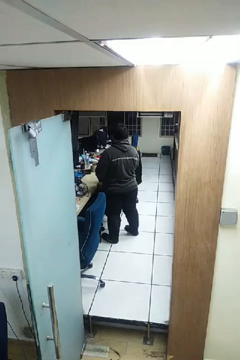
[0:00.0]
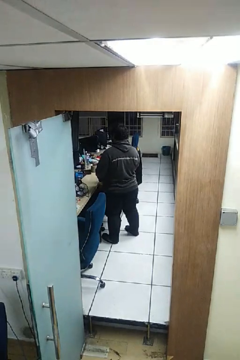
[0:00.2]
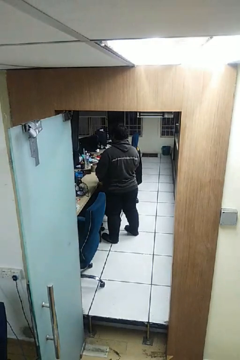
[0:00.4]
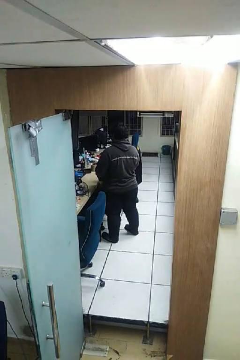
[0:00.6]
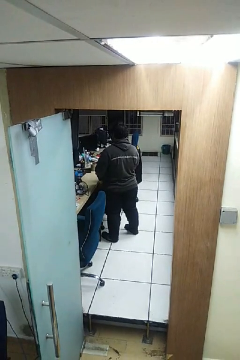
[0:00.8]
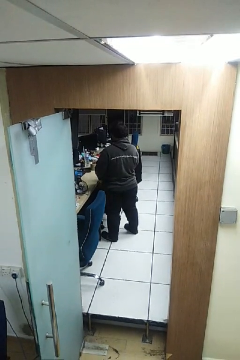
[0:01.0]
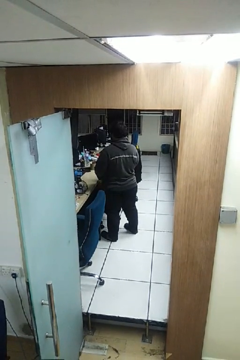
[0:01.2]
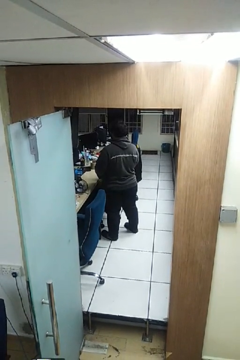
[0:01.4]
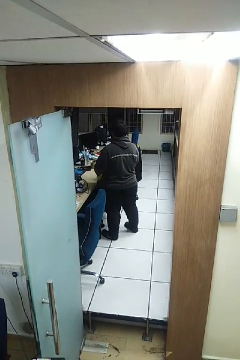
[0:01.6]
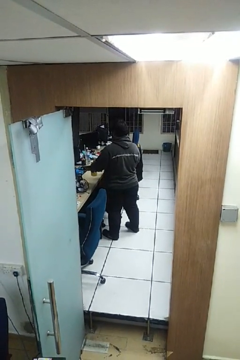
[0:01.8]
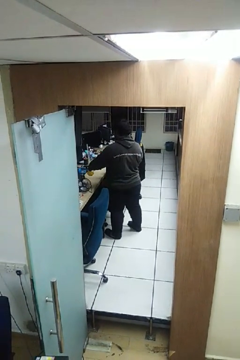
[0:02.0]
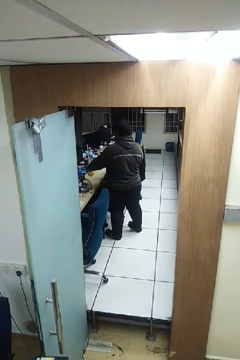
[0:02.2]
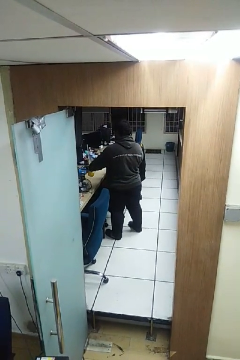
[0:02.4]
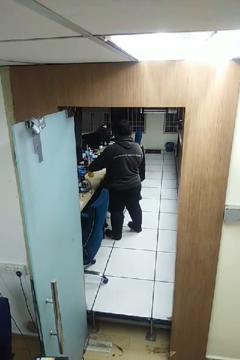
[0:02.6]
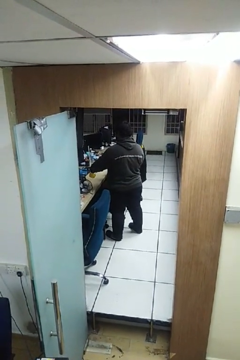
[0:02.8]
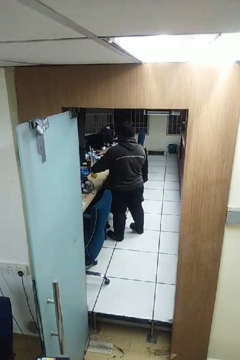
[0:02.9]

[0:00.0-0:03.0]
person sprays from bottle

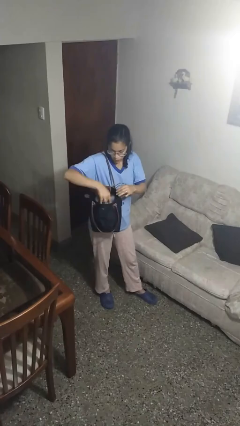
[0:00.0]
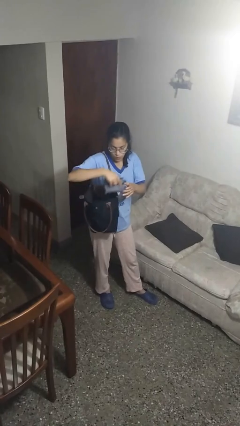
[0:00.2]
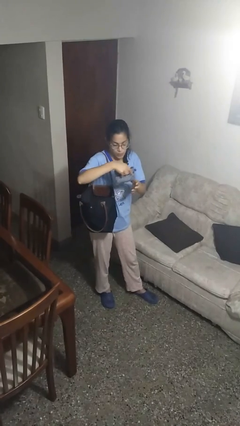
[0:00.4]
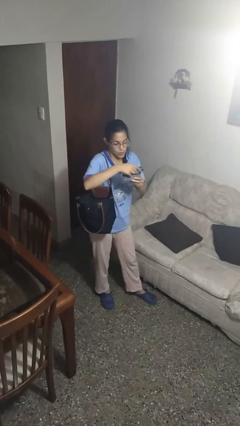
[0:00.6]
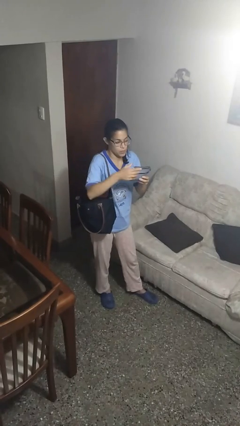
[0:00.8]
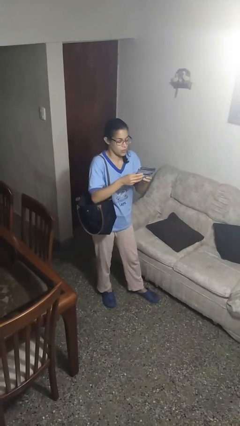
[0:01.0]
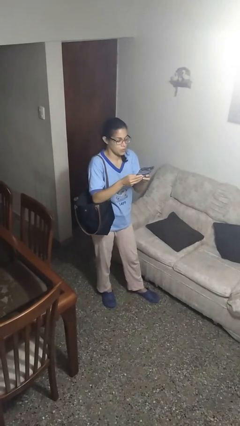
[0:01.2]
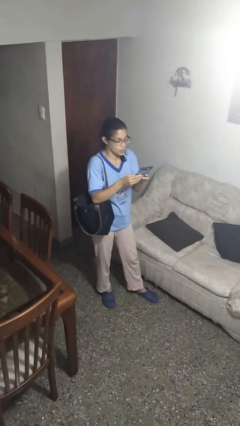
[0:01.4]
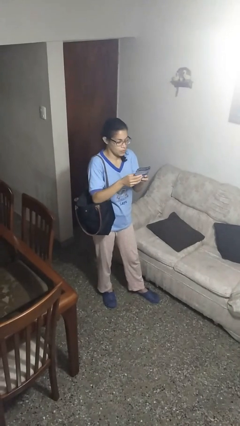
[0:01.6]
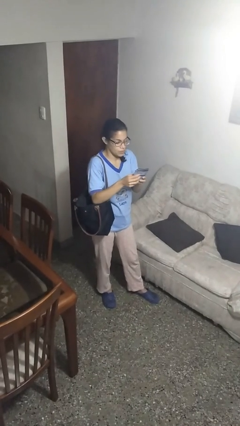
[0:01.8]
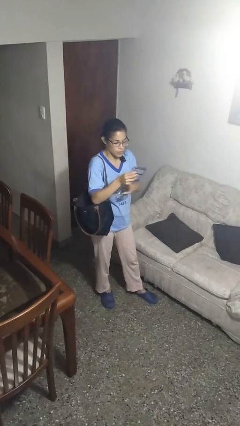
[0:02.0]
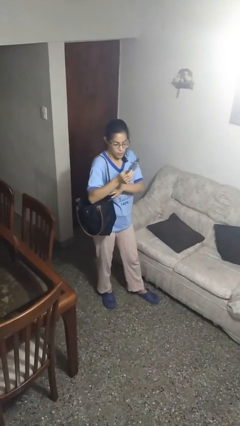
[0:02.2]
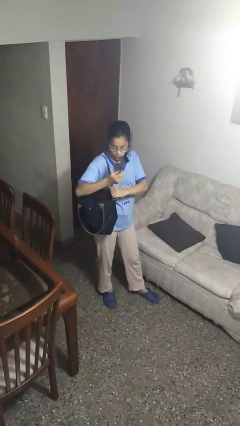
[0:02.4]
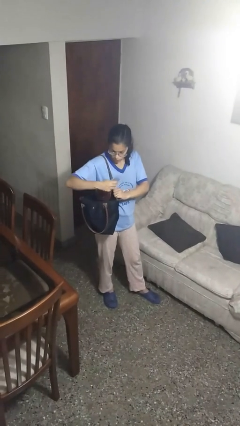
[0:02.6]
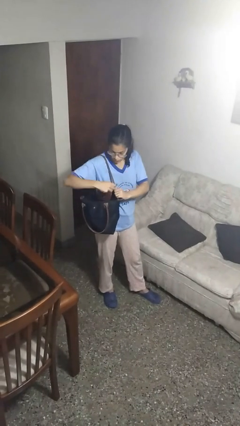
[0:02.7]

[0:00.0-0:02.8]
person takes object from purse

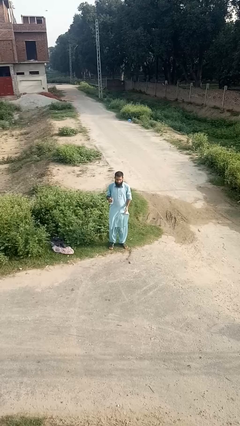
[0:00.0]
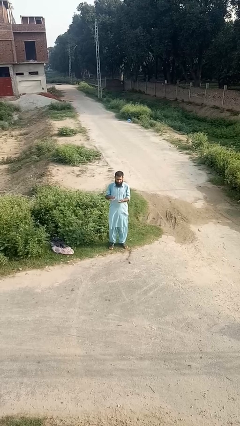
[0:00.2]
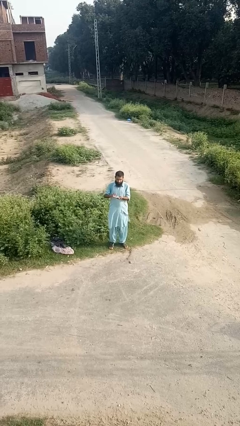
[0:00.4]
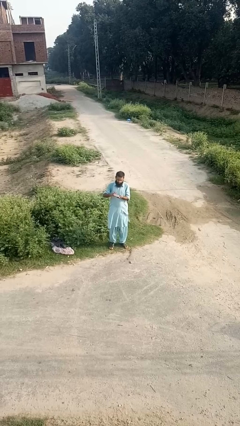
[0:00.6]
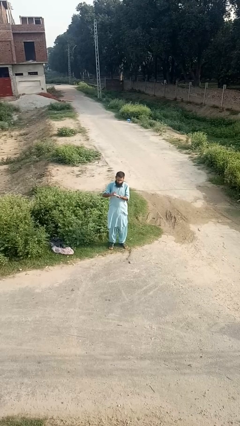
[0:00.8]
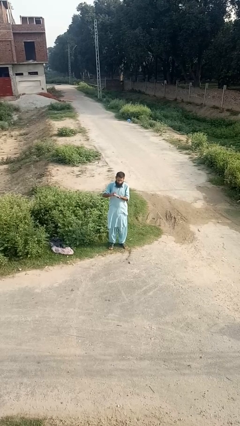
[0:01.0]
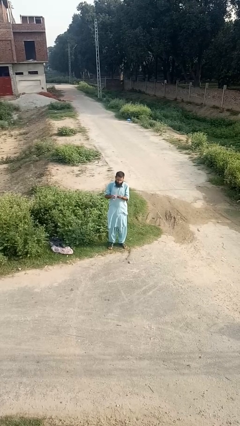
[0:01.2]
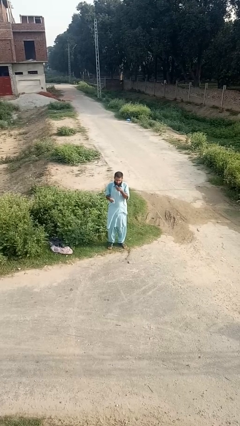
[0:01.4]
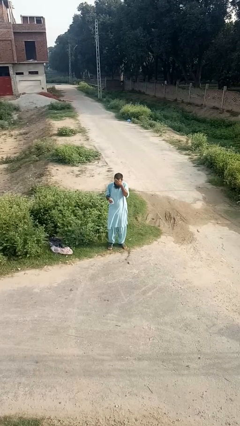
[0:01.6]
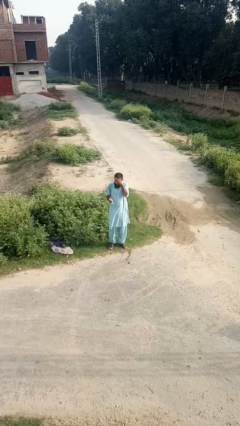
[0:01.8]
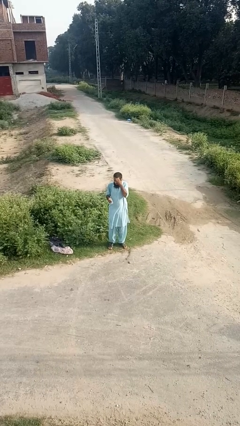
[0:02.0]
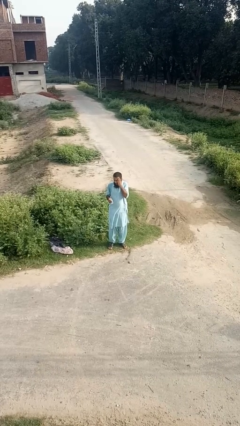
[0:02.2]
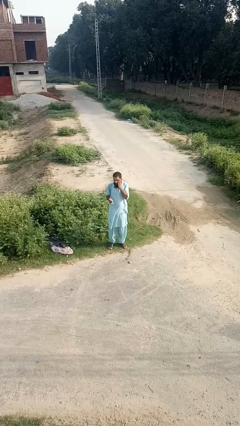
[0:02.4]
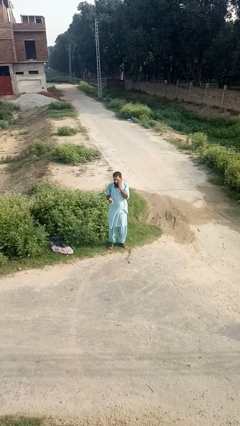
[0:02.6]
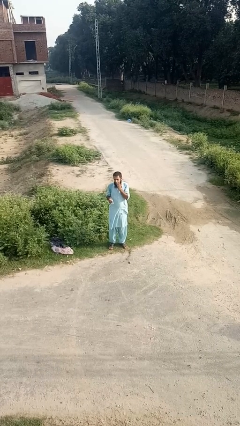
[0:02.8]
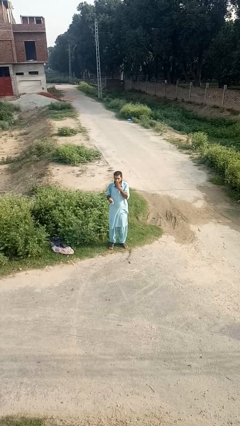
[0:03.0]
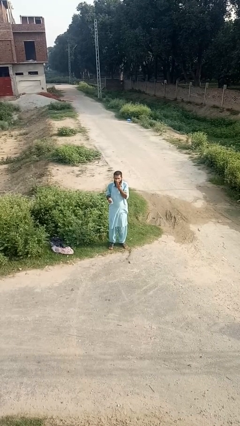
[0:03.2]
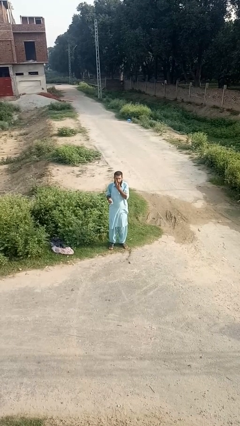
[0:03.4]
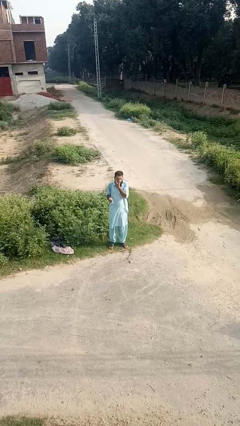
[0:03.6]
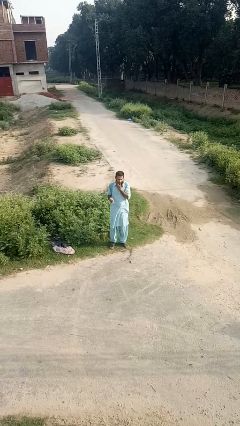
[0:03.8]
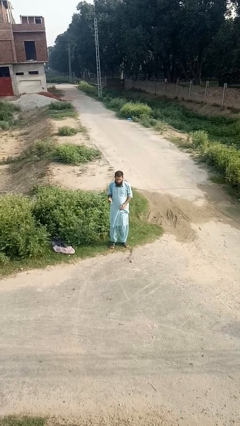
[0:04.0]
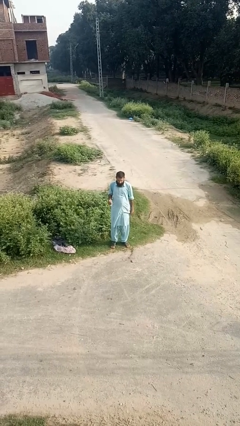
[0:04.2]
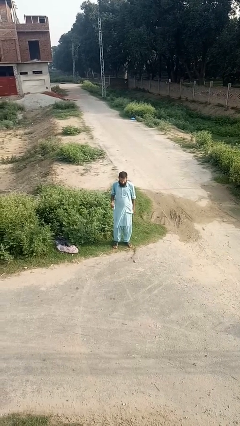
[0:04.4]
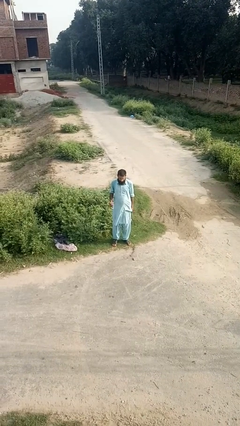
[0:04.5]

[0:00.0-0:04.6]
person applies facial moisturizer

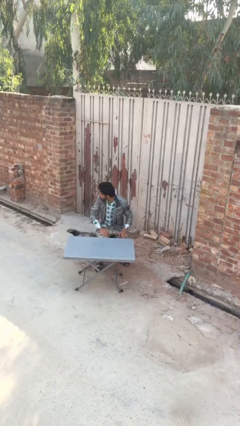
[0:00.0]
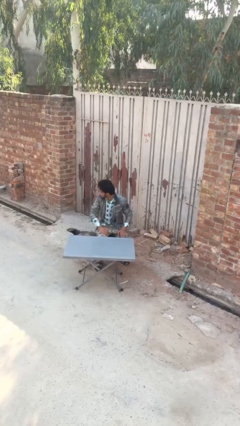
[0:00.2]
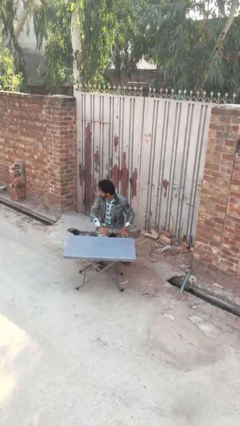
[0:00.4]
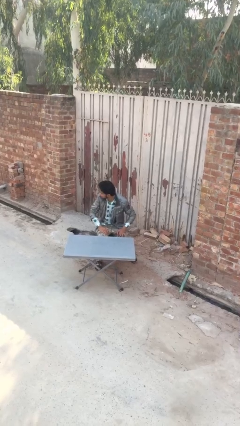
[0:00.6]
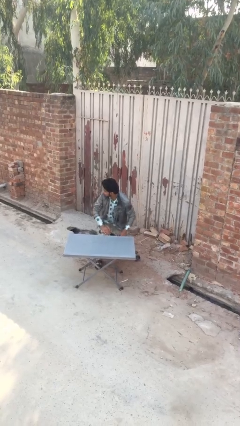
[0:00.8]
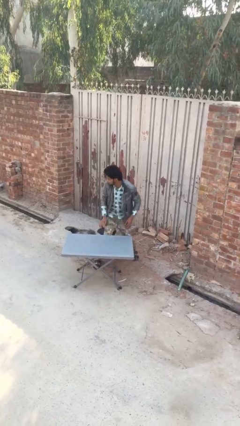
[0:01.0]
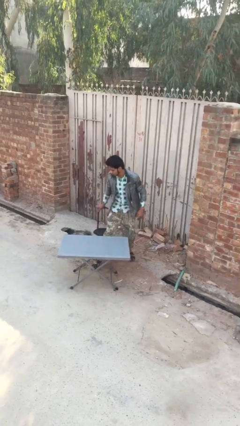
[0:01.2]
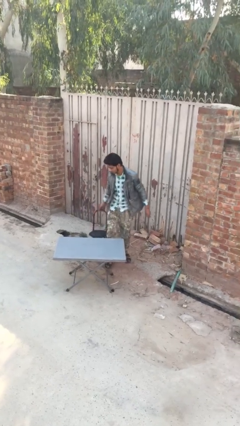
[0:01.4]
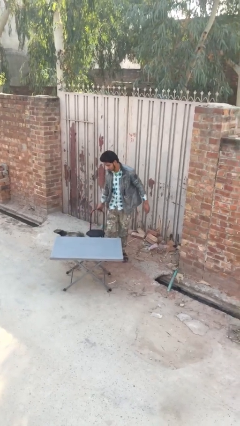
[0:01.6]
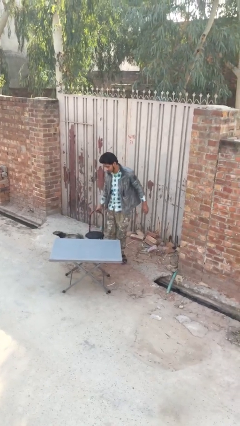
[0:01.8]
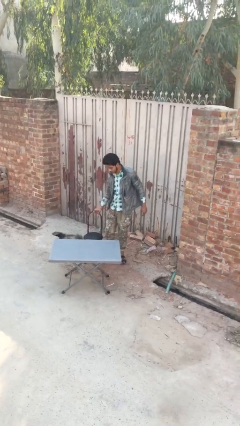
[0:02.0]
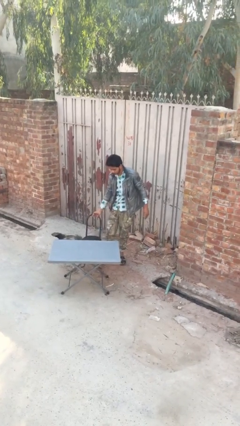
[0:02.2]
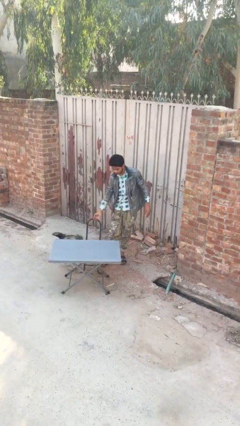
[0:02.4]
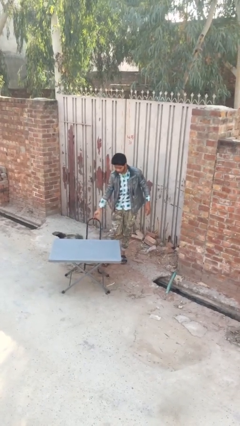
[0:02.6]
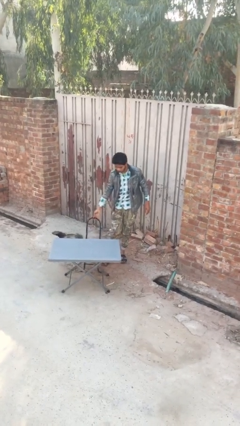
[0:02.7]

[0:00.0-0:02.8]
person stands up

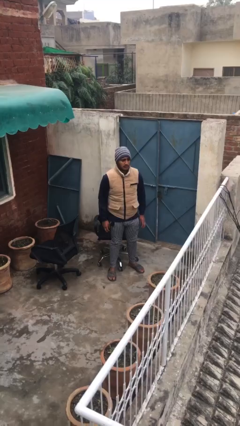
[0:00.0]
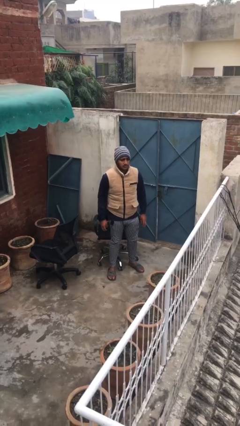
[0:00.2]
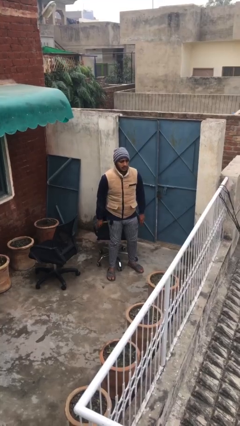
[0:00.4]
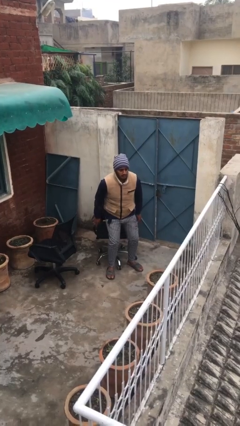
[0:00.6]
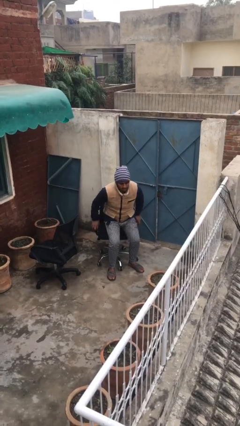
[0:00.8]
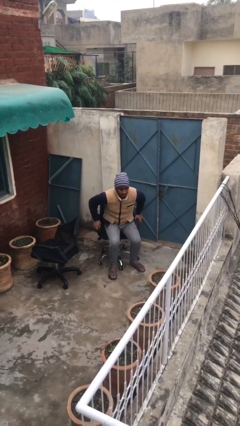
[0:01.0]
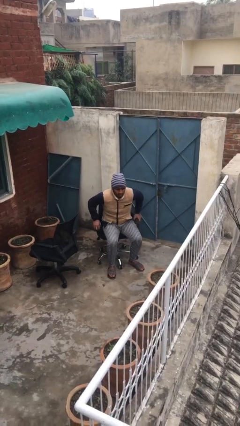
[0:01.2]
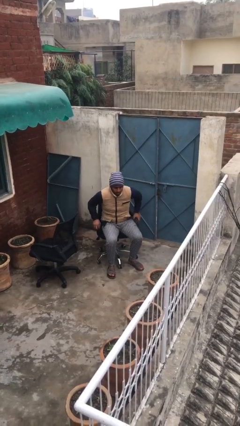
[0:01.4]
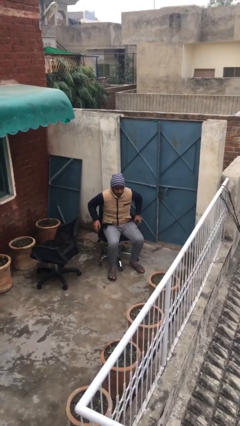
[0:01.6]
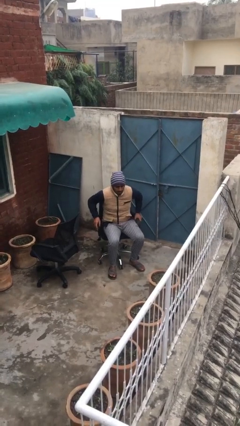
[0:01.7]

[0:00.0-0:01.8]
person sits down

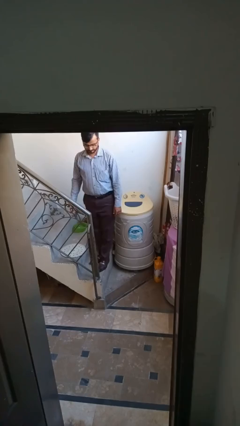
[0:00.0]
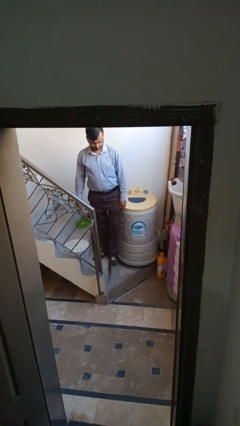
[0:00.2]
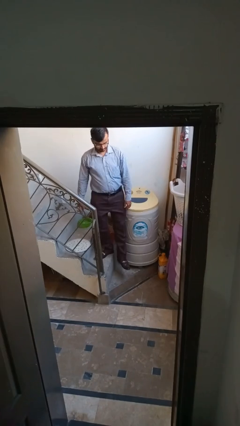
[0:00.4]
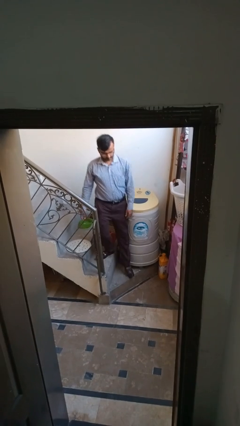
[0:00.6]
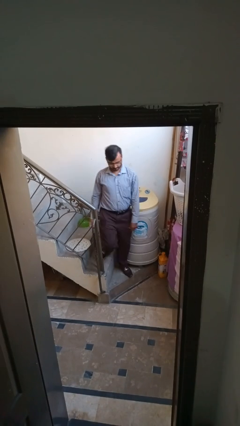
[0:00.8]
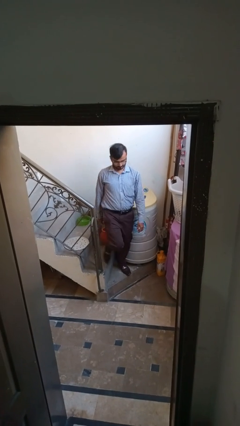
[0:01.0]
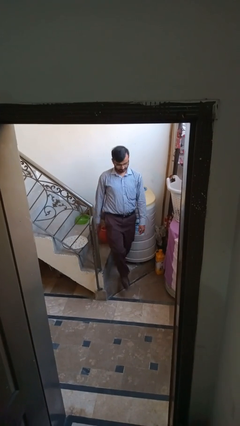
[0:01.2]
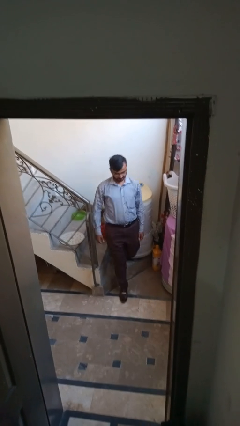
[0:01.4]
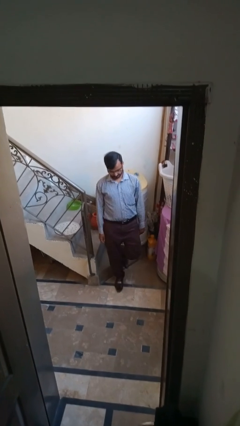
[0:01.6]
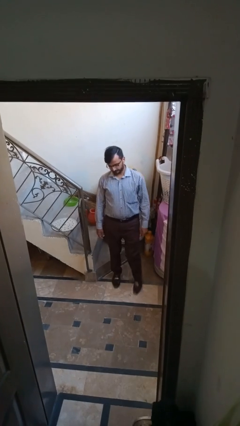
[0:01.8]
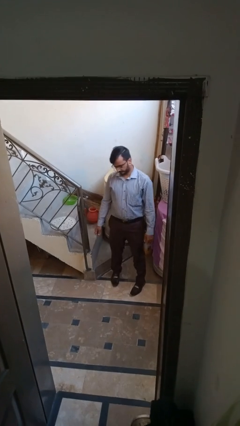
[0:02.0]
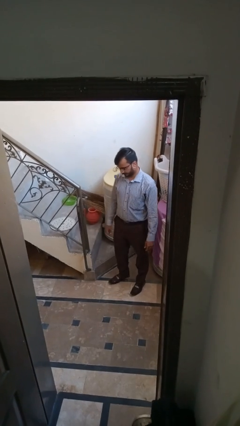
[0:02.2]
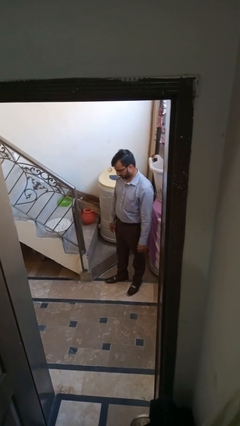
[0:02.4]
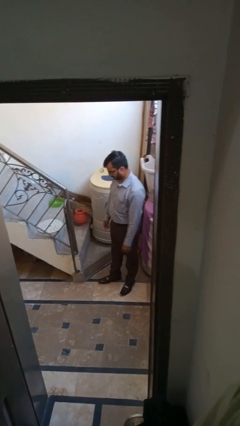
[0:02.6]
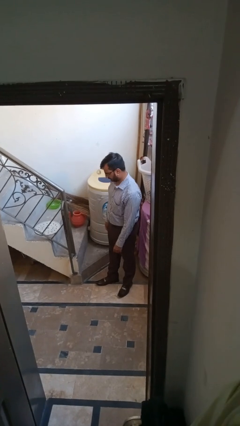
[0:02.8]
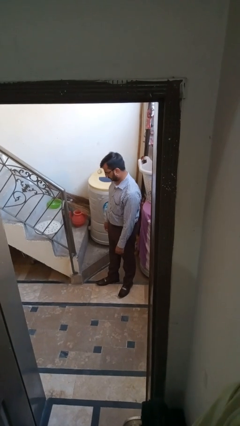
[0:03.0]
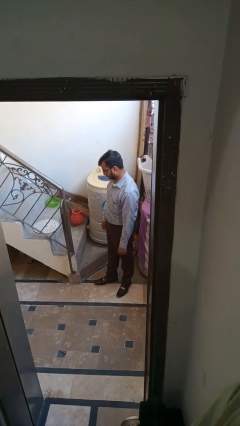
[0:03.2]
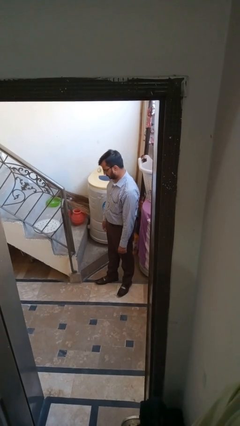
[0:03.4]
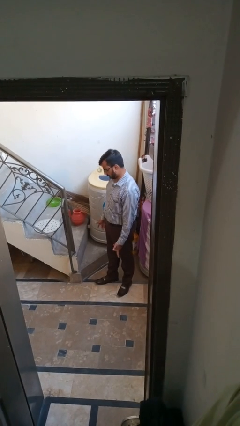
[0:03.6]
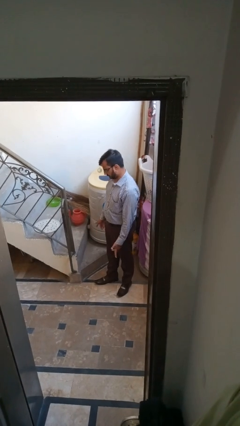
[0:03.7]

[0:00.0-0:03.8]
person climbs down stairs
